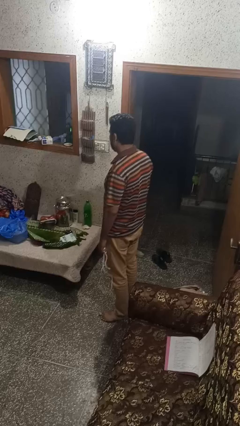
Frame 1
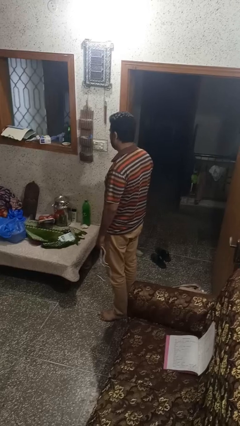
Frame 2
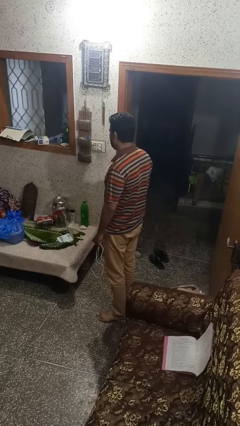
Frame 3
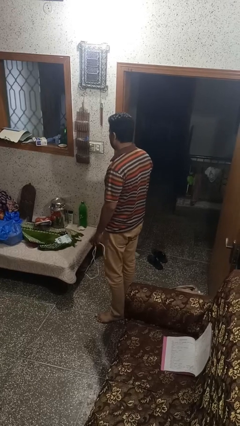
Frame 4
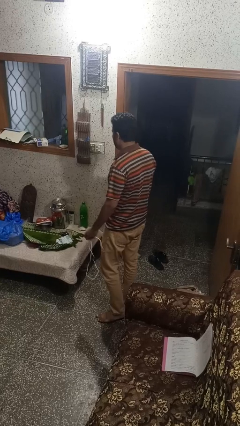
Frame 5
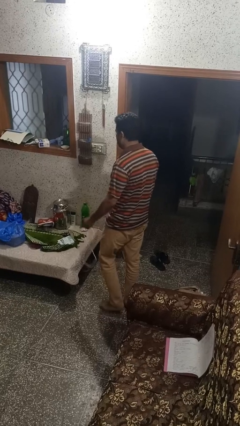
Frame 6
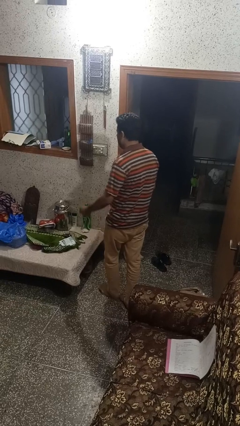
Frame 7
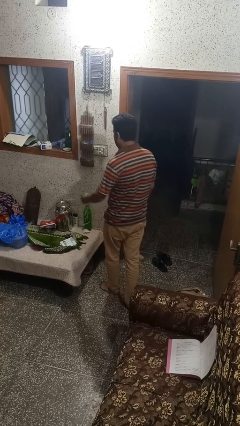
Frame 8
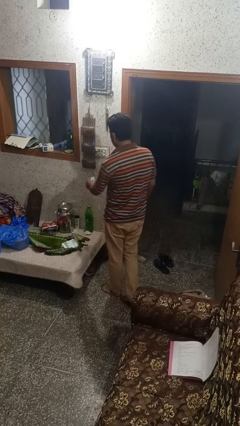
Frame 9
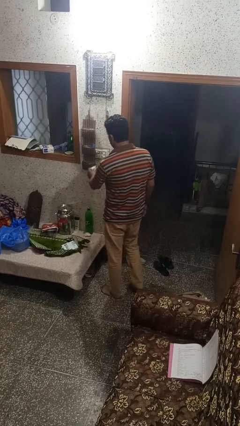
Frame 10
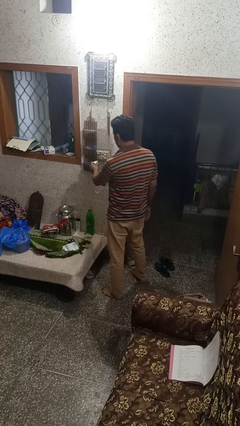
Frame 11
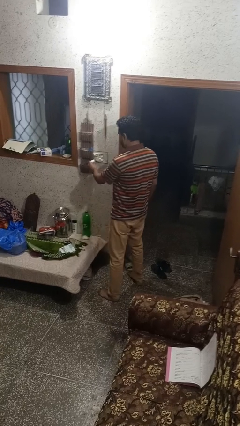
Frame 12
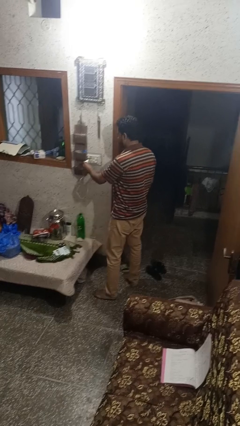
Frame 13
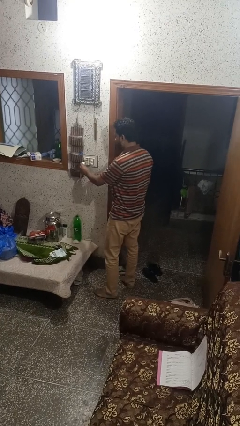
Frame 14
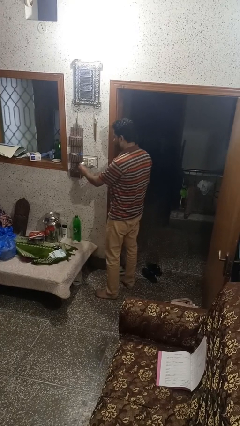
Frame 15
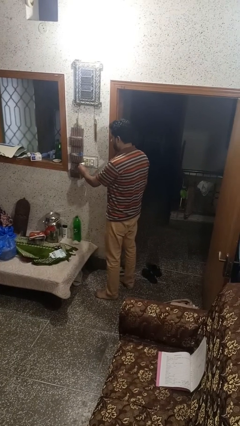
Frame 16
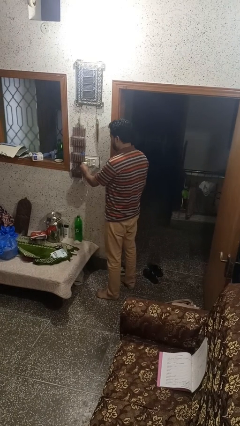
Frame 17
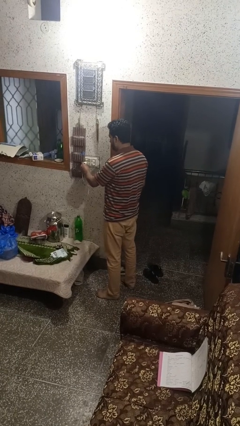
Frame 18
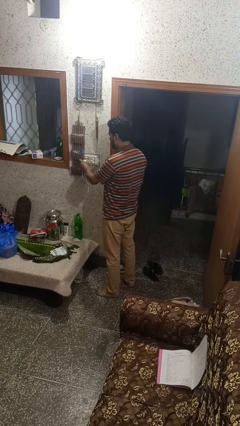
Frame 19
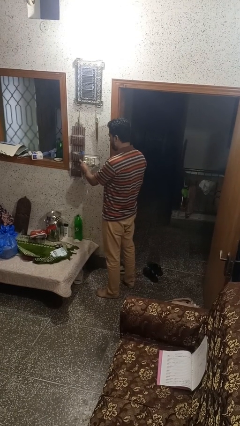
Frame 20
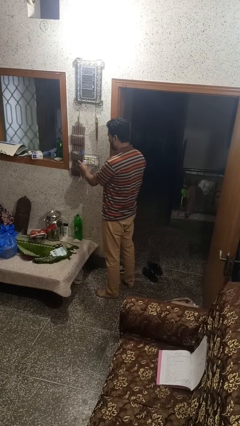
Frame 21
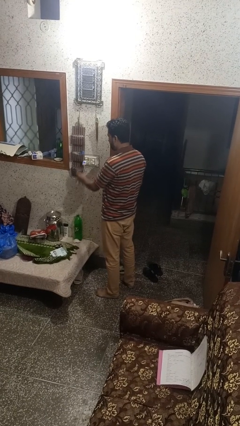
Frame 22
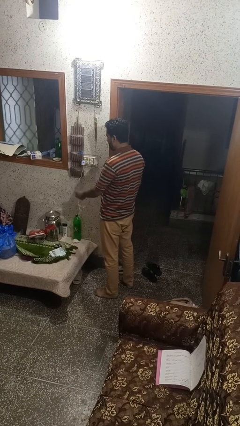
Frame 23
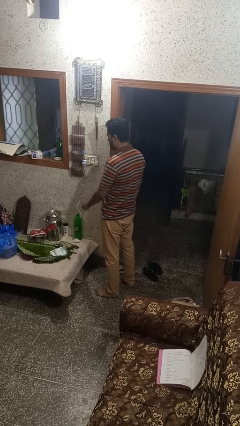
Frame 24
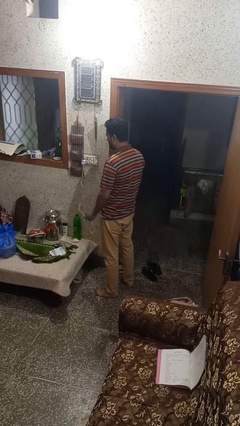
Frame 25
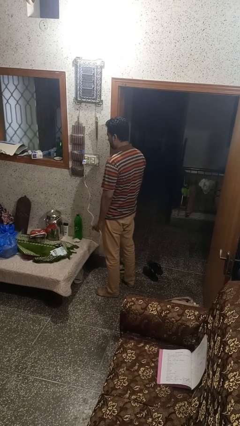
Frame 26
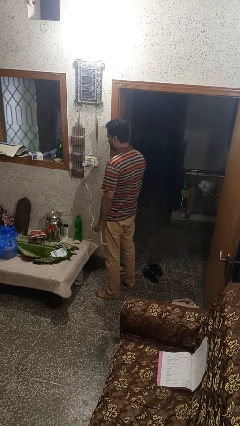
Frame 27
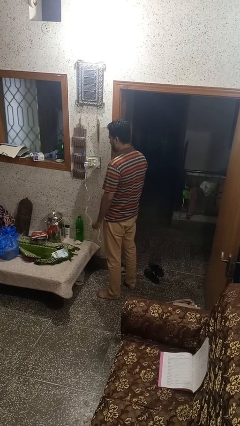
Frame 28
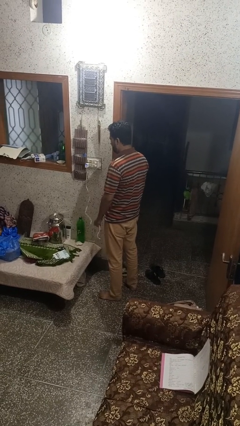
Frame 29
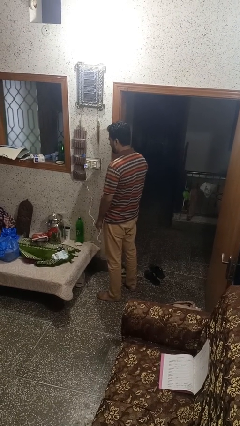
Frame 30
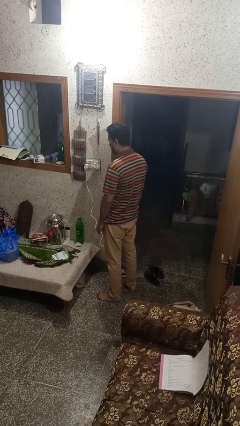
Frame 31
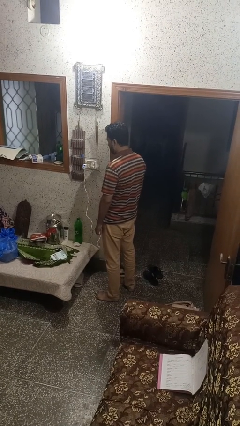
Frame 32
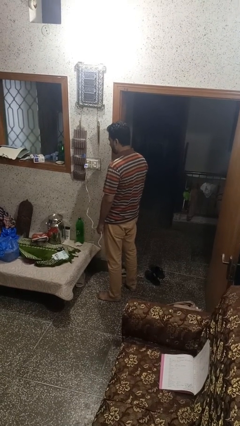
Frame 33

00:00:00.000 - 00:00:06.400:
person plugs into electrical socket

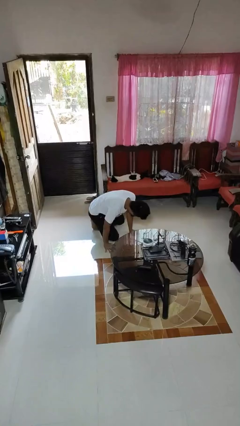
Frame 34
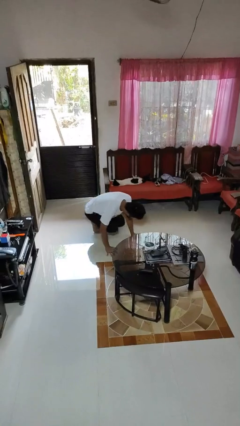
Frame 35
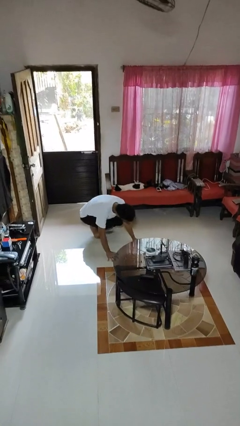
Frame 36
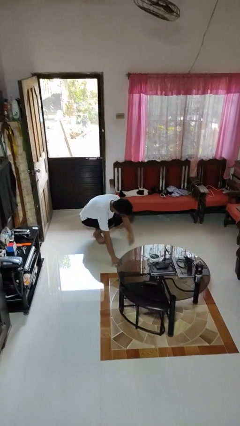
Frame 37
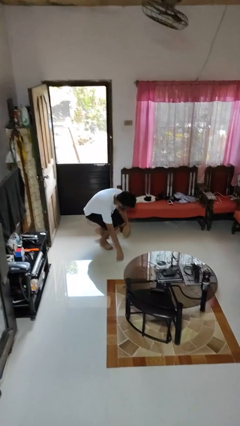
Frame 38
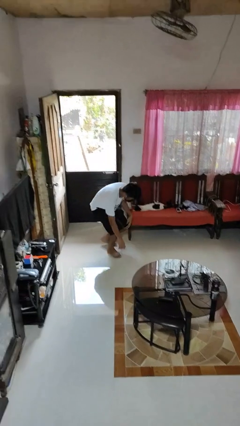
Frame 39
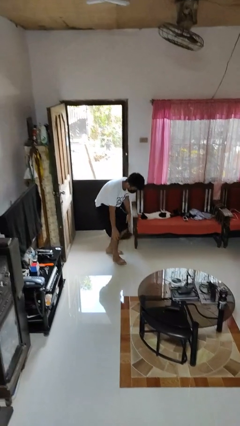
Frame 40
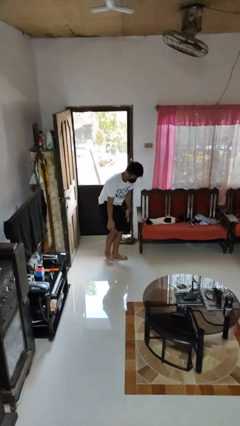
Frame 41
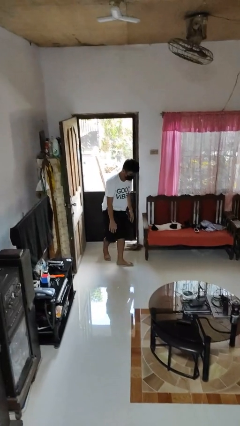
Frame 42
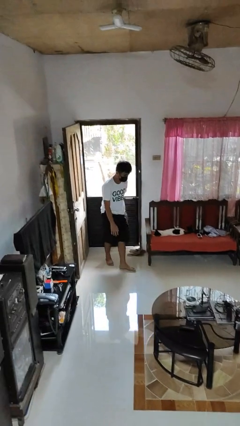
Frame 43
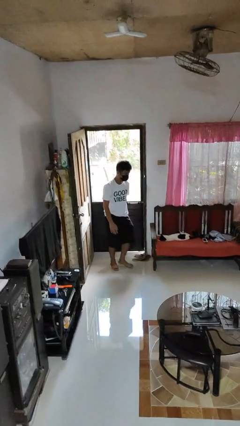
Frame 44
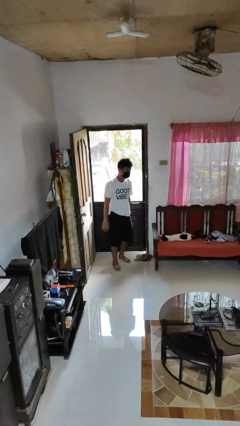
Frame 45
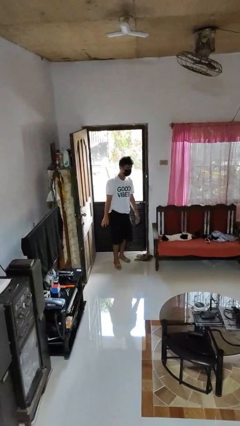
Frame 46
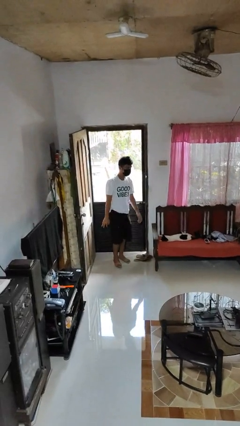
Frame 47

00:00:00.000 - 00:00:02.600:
person stands up from floor

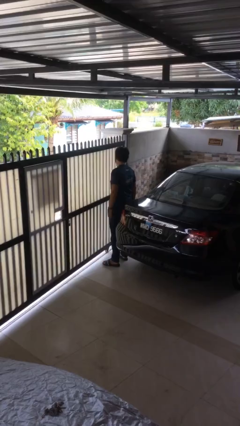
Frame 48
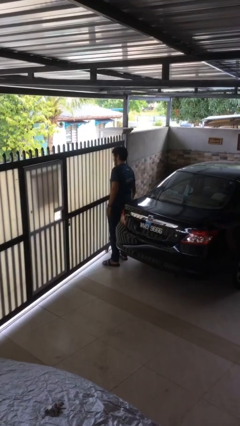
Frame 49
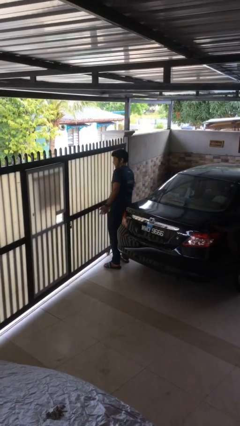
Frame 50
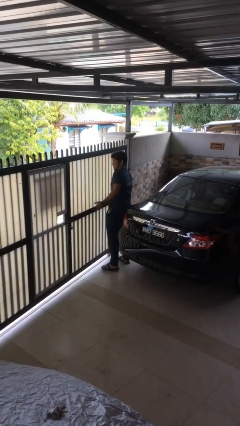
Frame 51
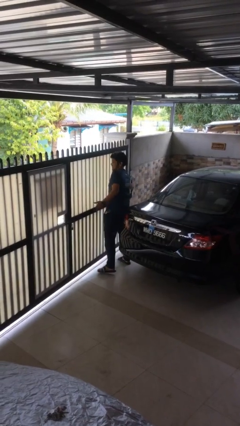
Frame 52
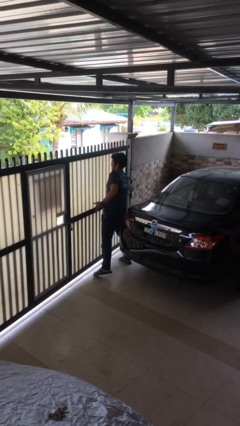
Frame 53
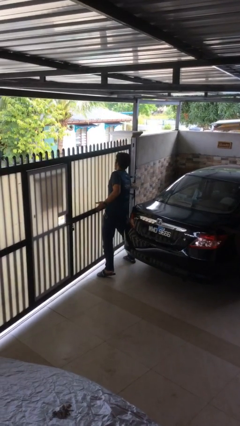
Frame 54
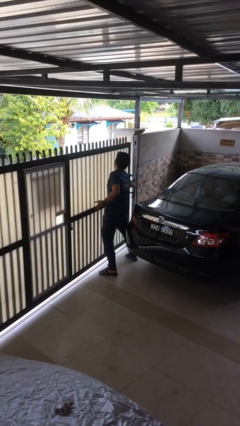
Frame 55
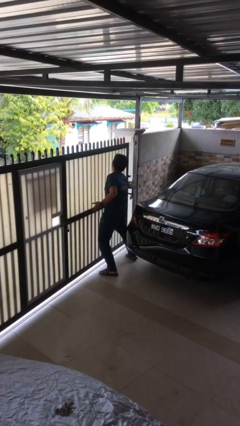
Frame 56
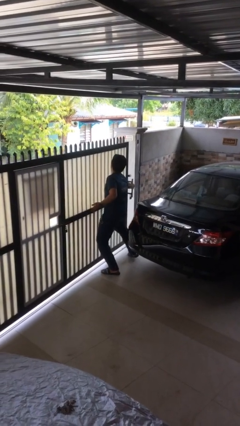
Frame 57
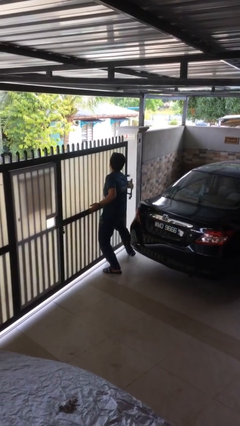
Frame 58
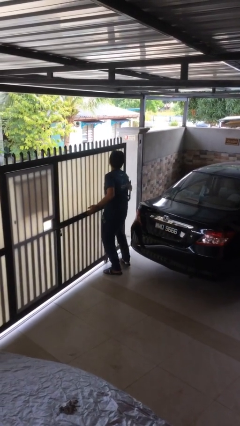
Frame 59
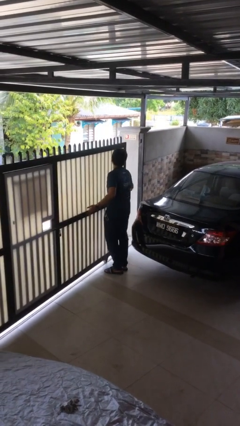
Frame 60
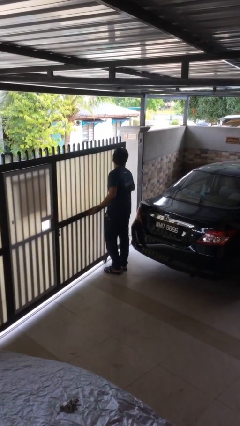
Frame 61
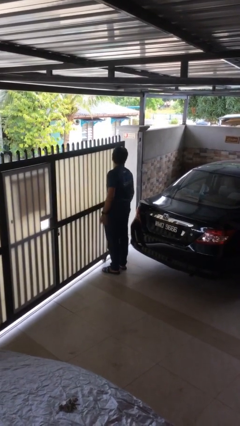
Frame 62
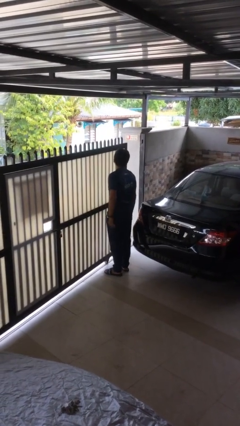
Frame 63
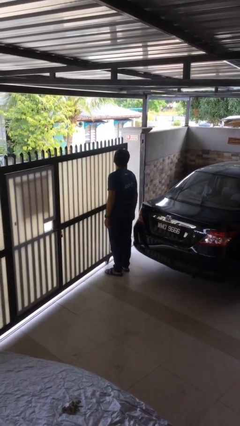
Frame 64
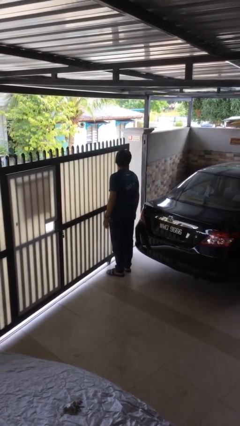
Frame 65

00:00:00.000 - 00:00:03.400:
person opens sliding door

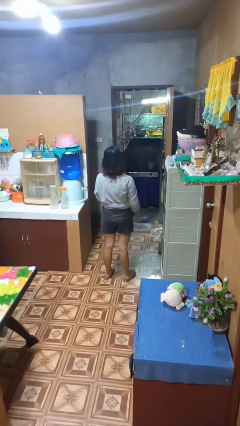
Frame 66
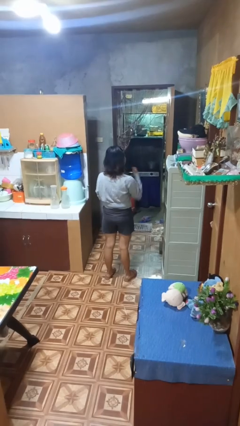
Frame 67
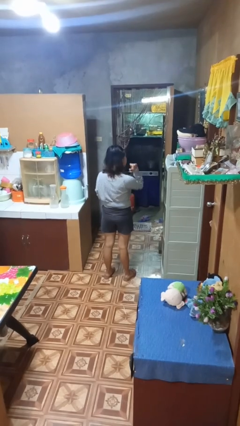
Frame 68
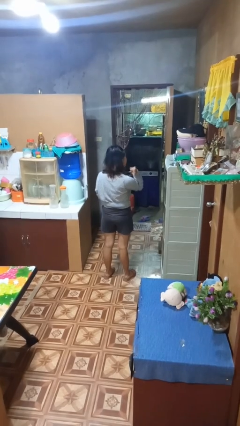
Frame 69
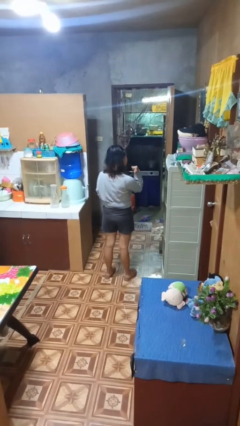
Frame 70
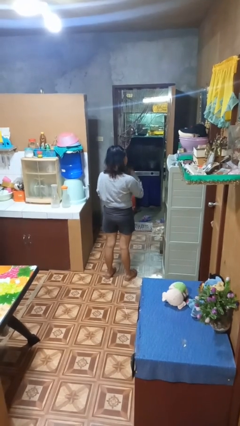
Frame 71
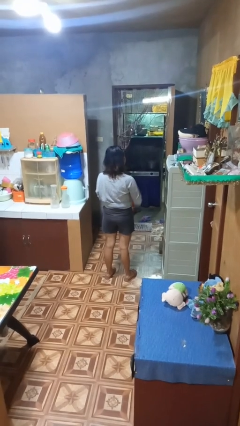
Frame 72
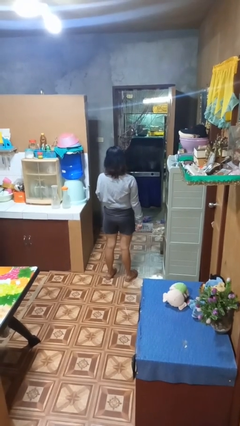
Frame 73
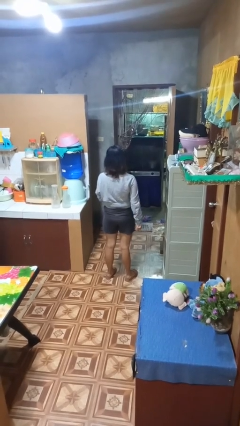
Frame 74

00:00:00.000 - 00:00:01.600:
person gestures behind me

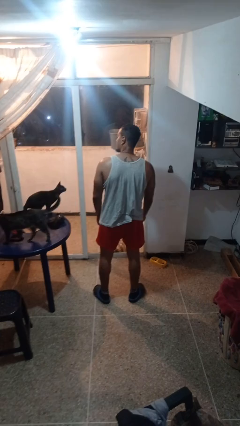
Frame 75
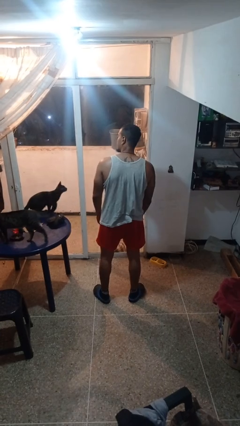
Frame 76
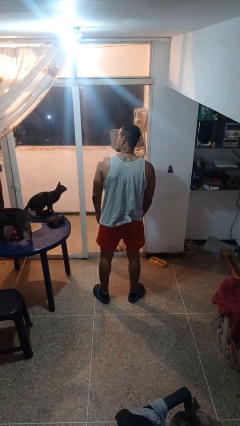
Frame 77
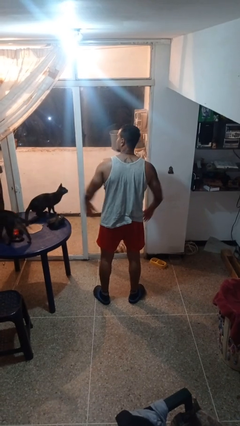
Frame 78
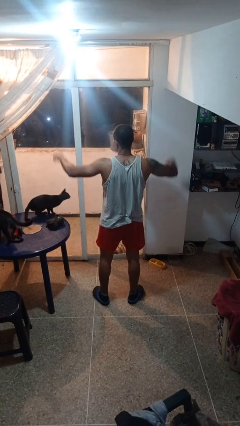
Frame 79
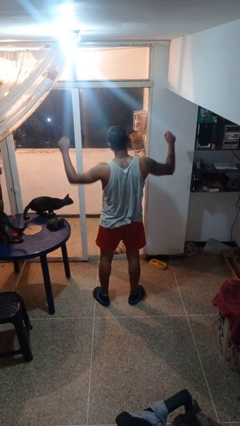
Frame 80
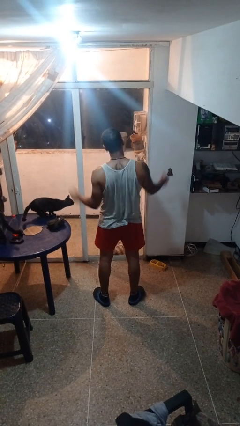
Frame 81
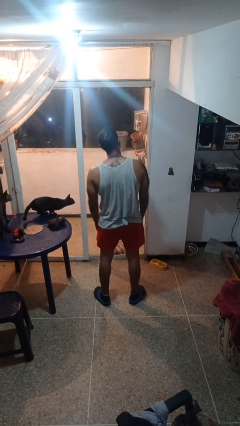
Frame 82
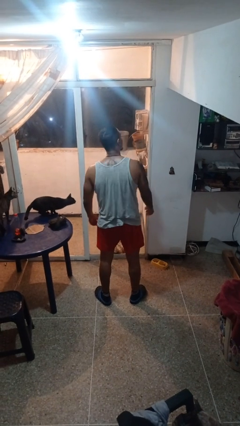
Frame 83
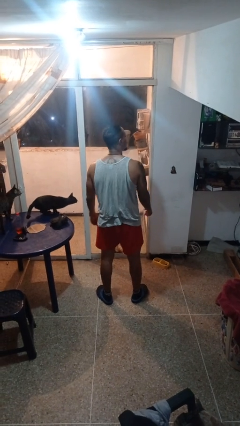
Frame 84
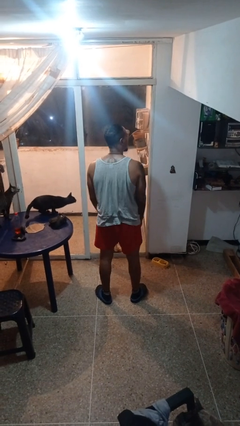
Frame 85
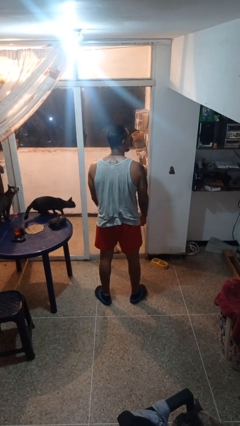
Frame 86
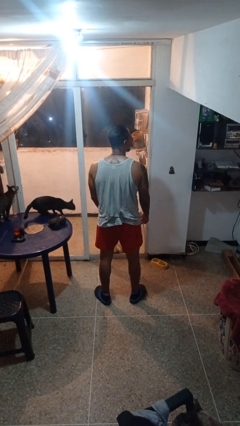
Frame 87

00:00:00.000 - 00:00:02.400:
person slaps hands on thighs

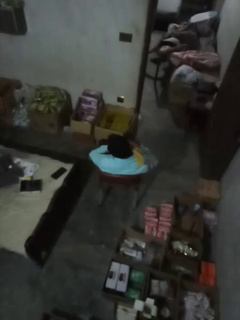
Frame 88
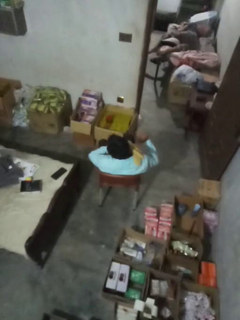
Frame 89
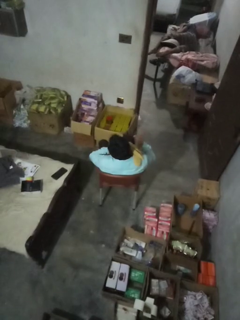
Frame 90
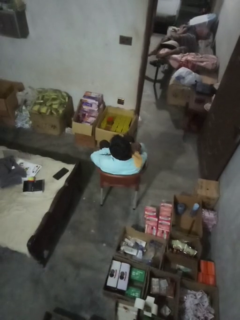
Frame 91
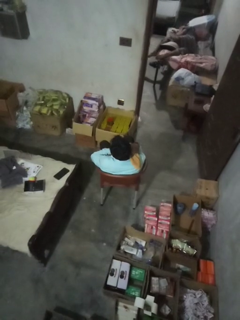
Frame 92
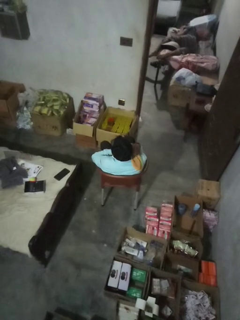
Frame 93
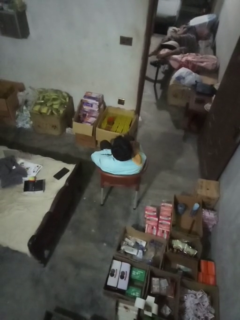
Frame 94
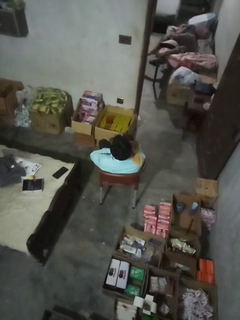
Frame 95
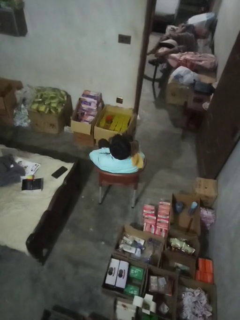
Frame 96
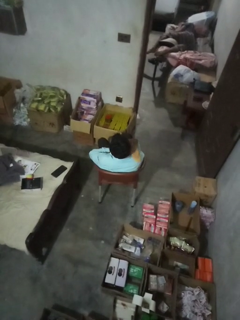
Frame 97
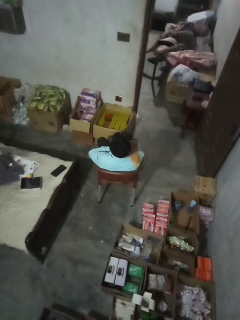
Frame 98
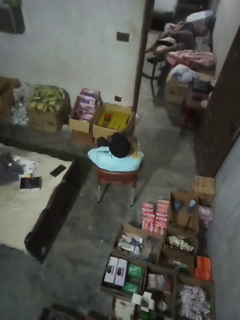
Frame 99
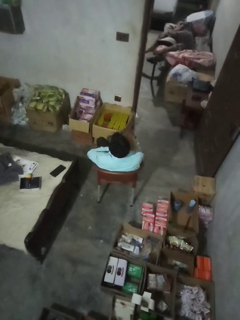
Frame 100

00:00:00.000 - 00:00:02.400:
person hugs stuffed animal
